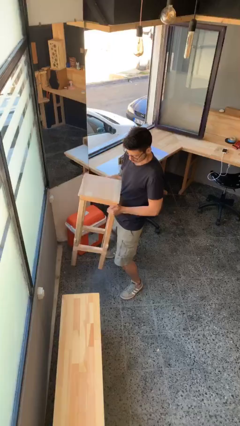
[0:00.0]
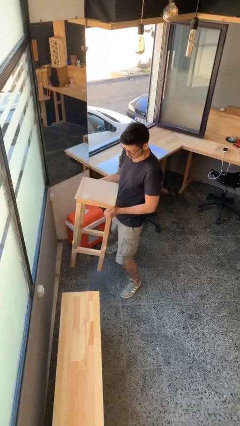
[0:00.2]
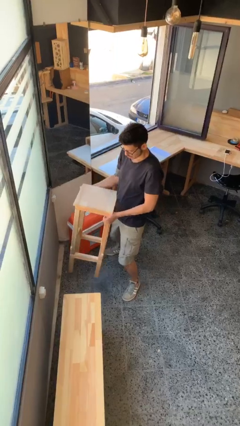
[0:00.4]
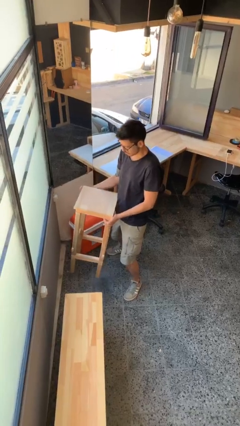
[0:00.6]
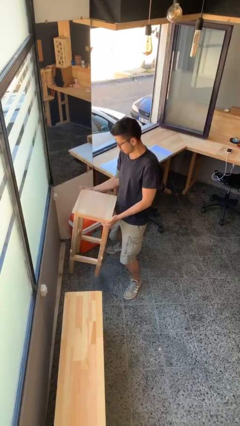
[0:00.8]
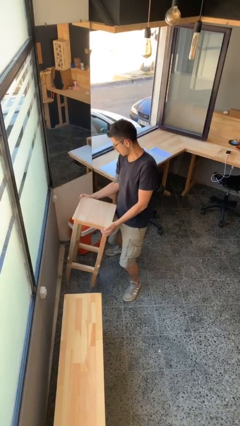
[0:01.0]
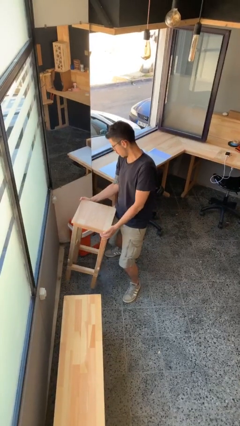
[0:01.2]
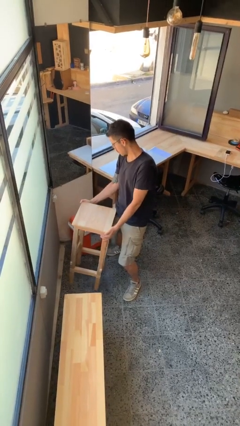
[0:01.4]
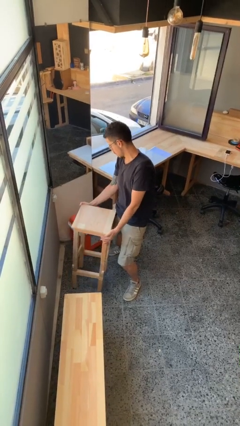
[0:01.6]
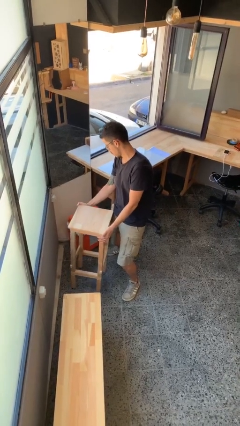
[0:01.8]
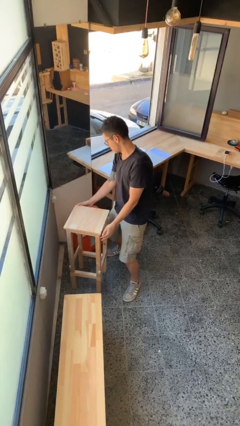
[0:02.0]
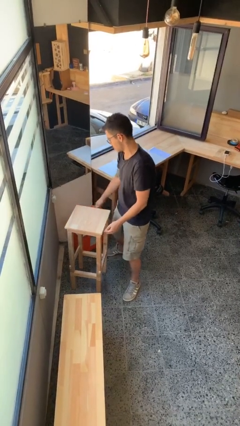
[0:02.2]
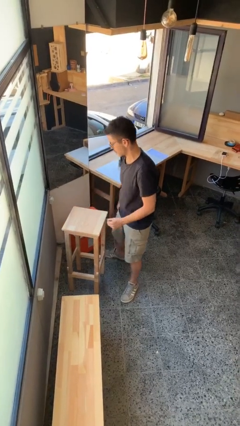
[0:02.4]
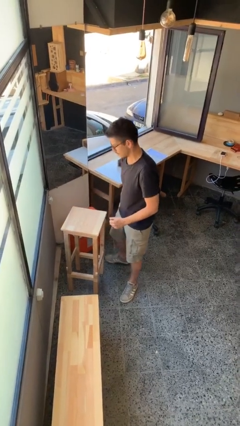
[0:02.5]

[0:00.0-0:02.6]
person puts down object on floor

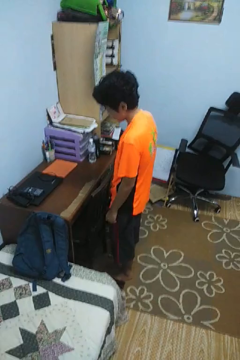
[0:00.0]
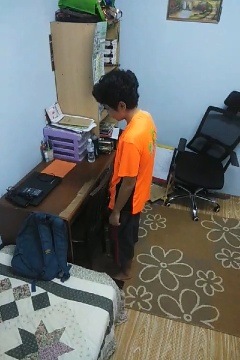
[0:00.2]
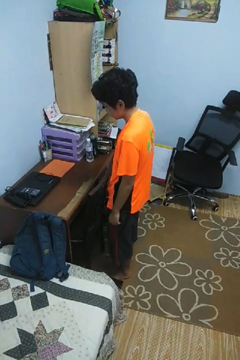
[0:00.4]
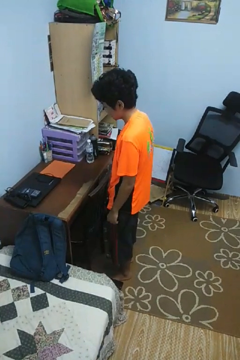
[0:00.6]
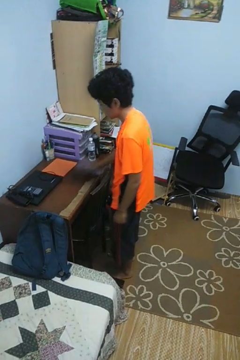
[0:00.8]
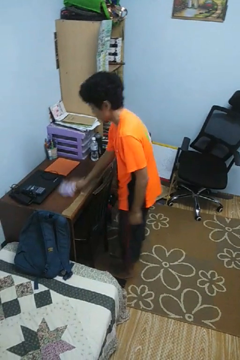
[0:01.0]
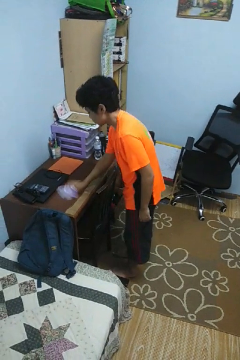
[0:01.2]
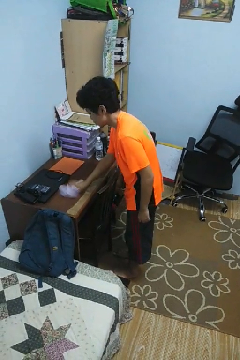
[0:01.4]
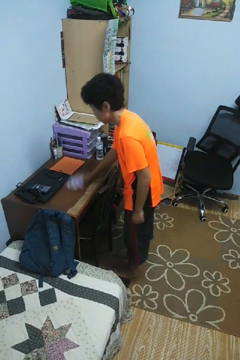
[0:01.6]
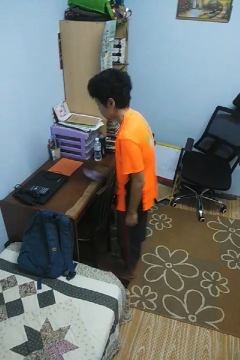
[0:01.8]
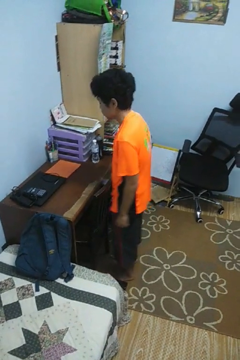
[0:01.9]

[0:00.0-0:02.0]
person cleans table with rag

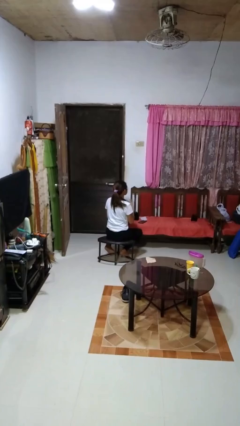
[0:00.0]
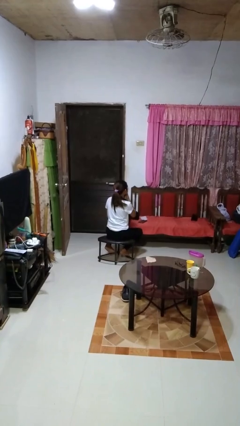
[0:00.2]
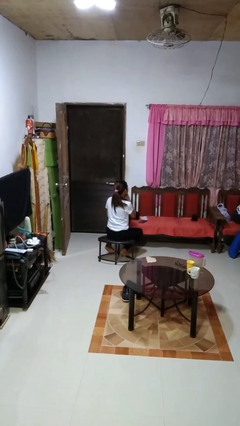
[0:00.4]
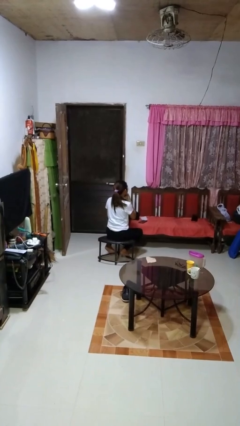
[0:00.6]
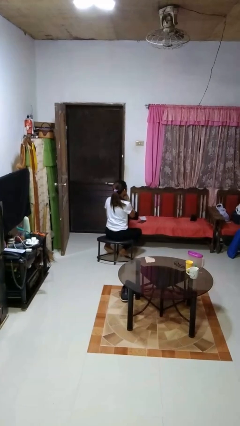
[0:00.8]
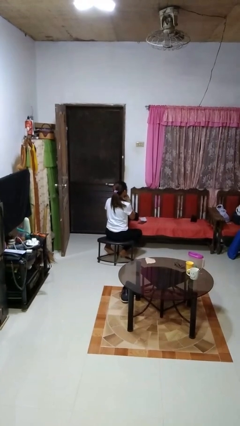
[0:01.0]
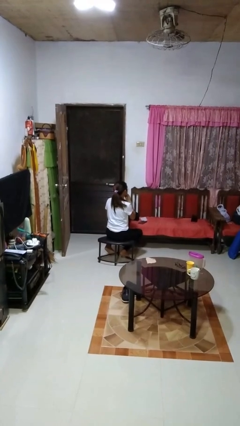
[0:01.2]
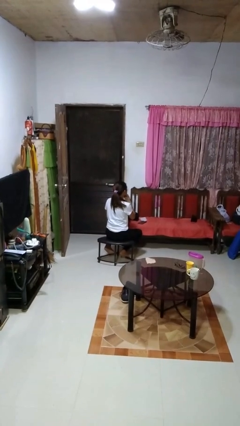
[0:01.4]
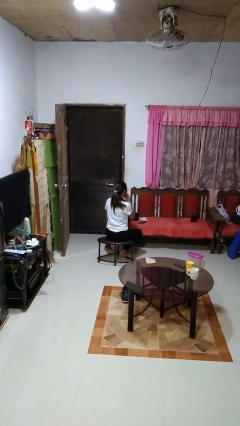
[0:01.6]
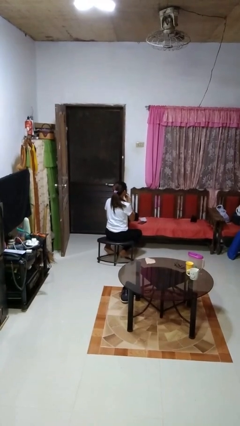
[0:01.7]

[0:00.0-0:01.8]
person strokes chin

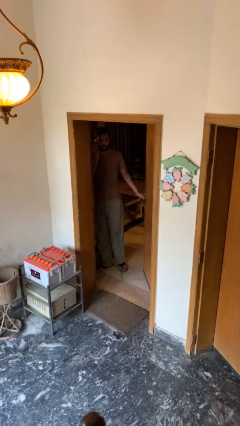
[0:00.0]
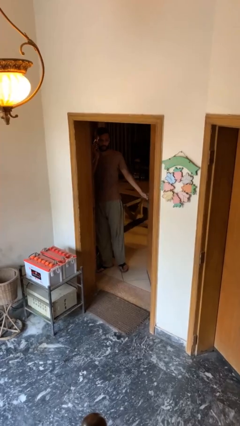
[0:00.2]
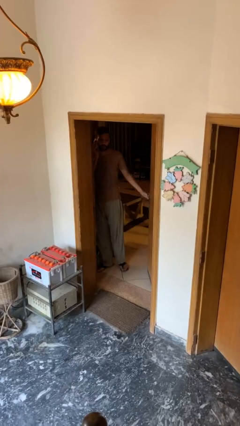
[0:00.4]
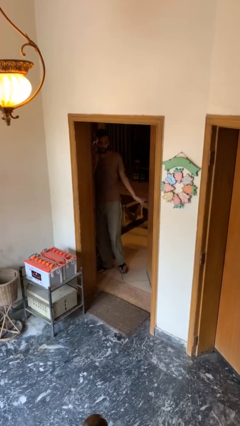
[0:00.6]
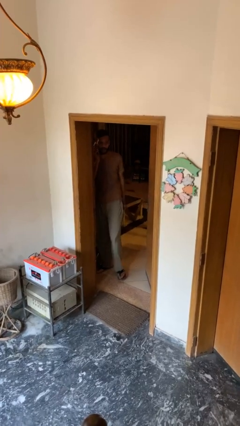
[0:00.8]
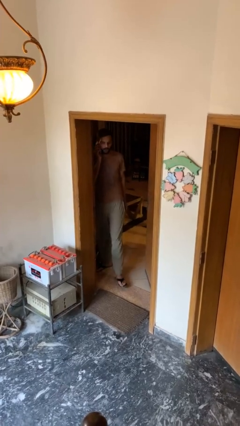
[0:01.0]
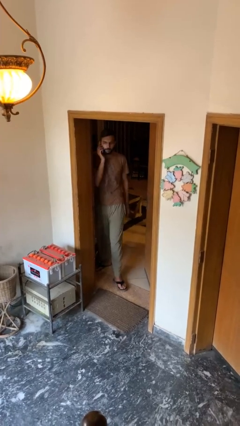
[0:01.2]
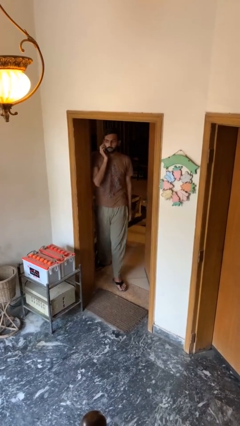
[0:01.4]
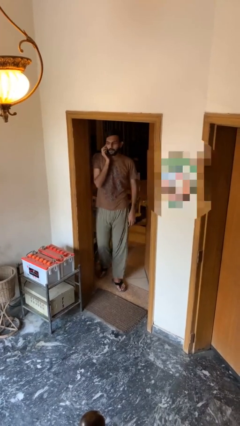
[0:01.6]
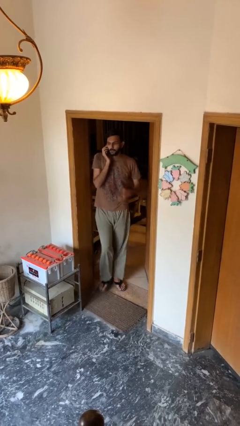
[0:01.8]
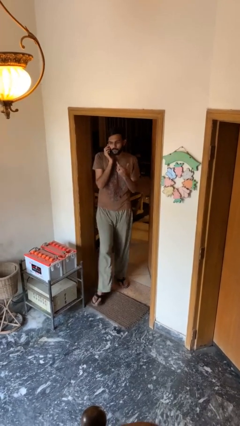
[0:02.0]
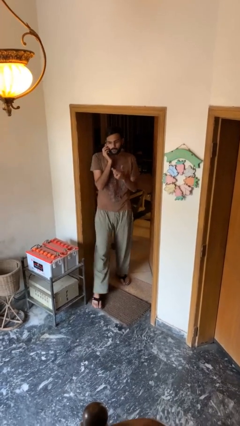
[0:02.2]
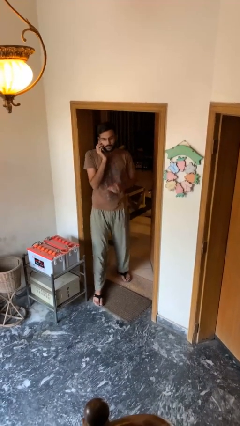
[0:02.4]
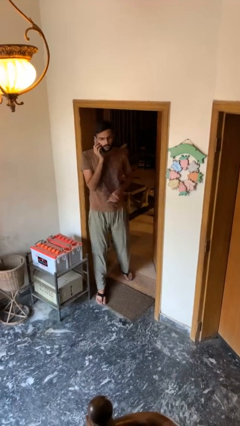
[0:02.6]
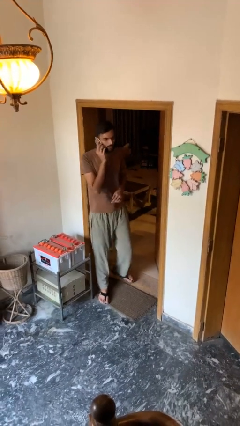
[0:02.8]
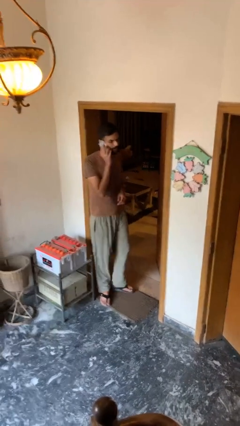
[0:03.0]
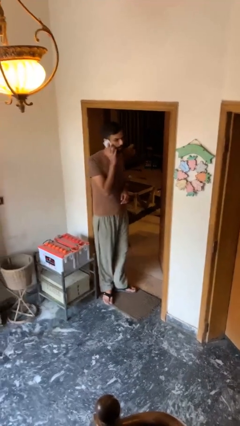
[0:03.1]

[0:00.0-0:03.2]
person enters scene through structure

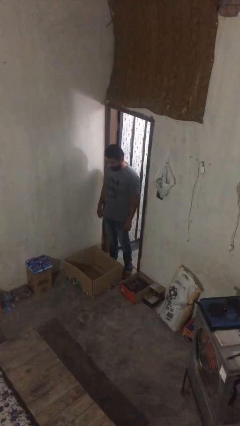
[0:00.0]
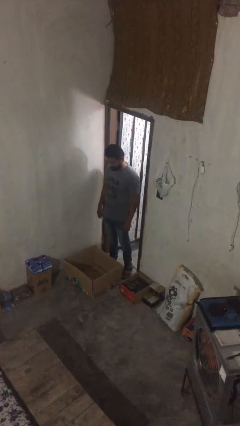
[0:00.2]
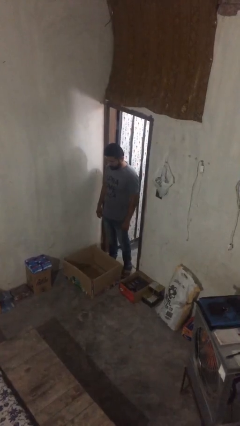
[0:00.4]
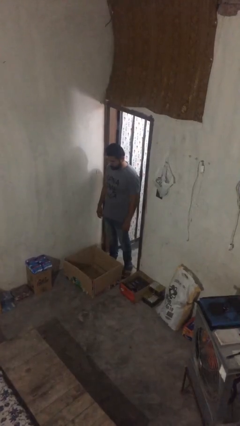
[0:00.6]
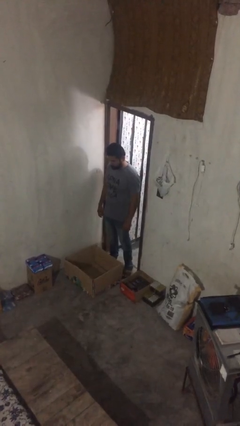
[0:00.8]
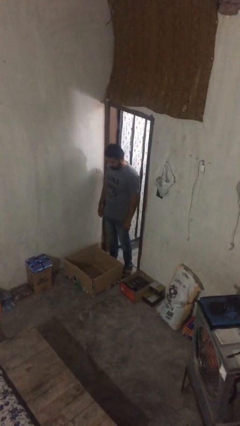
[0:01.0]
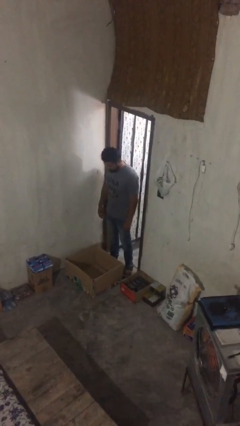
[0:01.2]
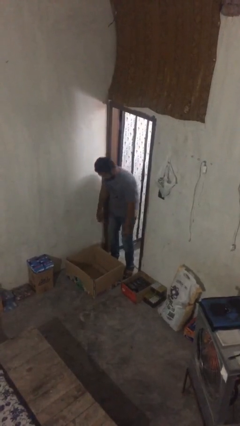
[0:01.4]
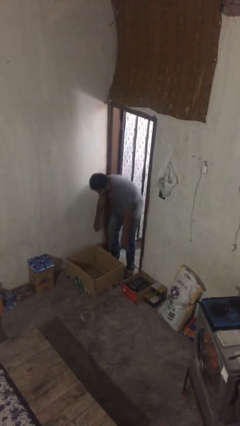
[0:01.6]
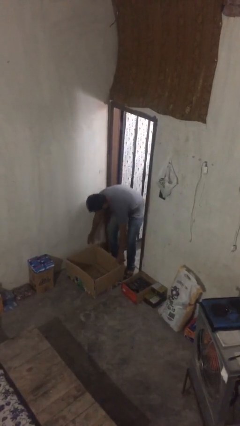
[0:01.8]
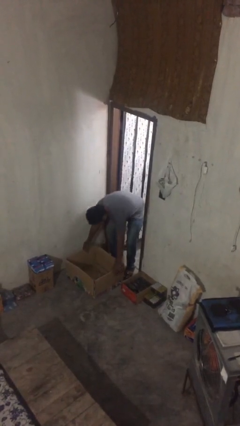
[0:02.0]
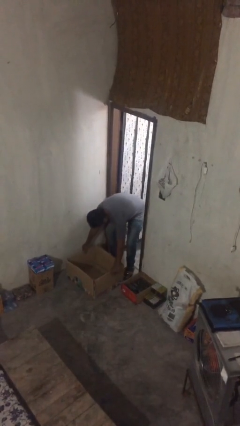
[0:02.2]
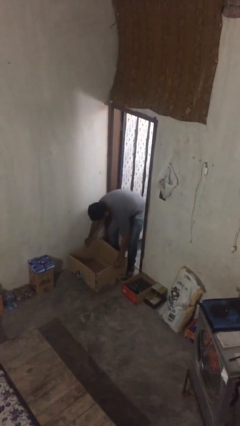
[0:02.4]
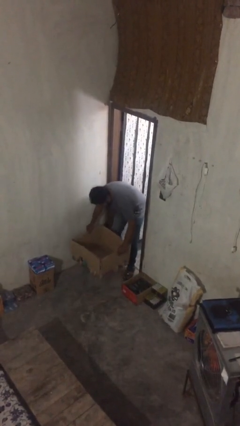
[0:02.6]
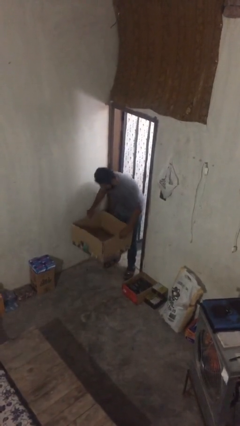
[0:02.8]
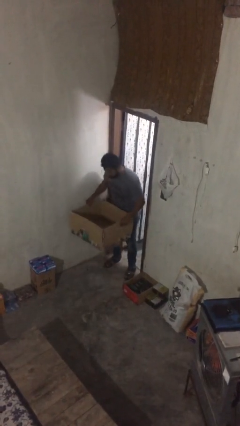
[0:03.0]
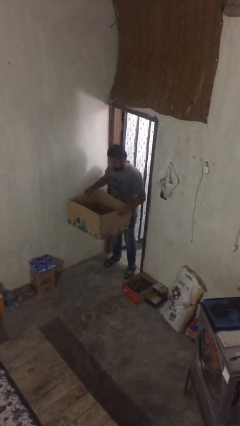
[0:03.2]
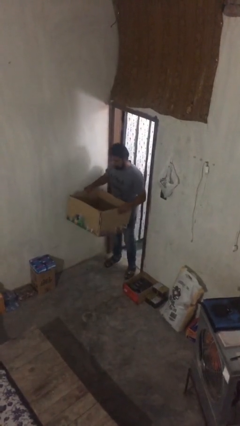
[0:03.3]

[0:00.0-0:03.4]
person picks up object from floor

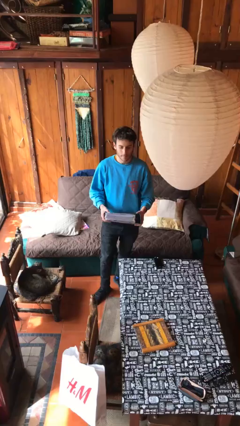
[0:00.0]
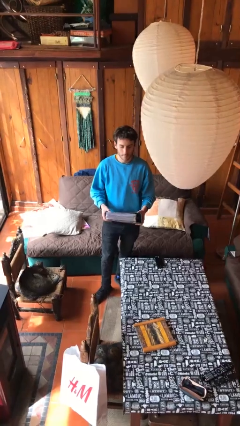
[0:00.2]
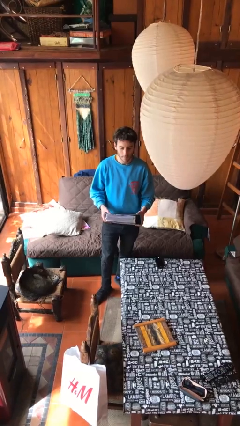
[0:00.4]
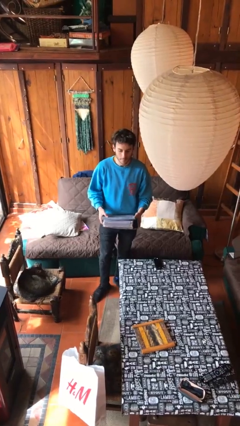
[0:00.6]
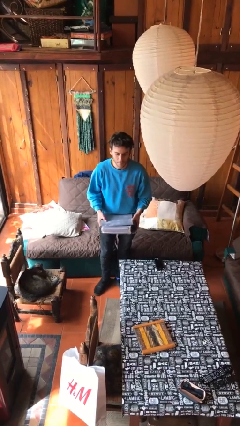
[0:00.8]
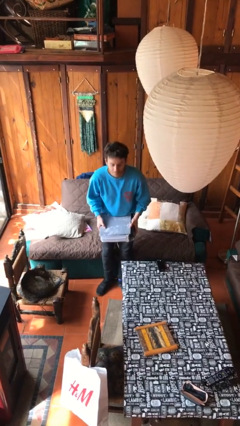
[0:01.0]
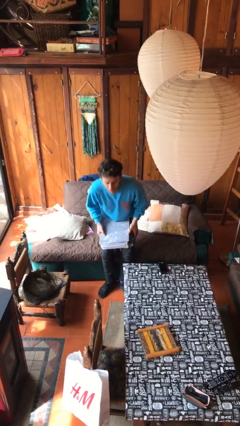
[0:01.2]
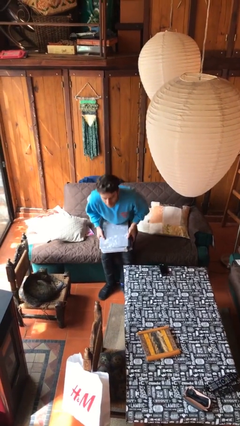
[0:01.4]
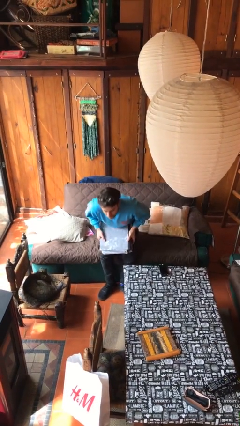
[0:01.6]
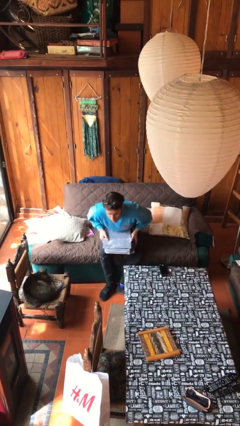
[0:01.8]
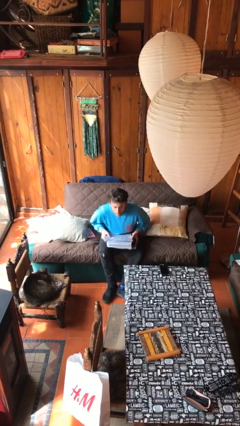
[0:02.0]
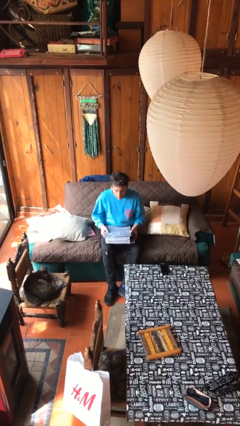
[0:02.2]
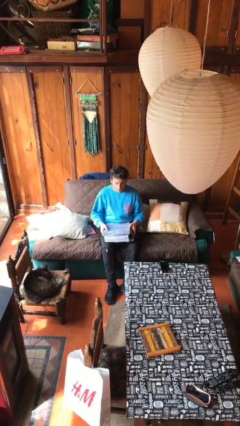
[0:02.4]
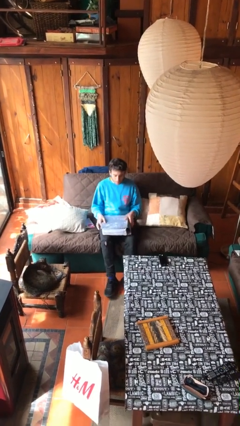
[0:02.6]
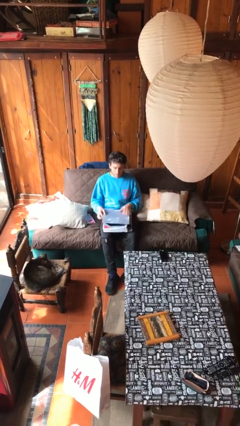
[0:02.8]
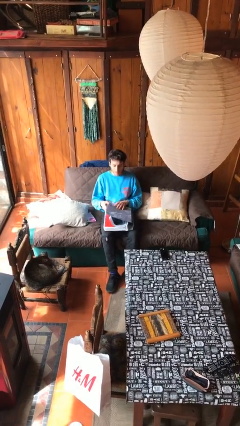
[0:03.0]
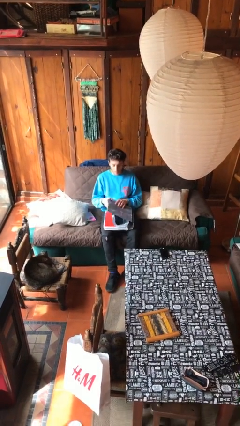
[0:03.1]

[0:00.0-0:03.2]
person sits down

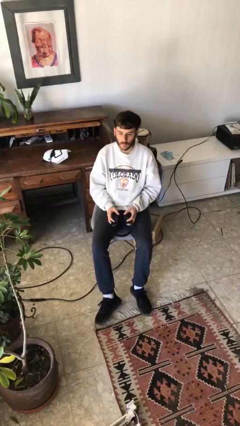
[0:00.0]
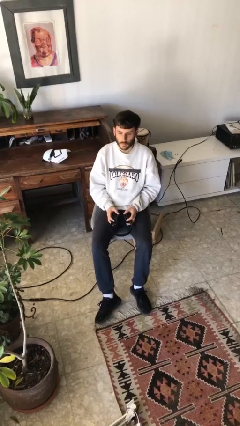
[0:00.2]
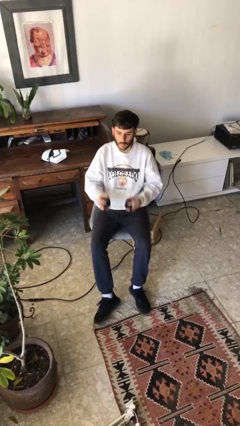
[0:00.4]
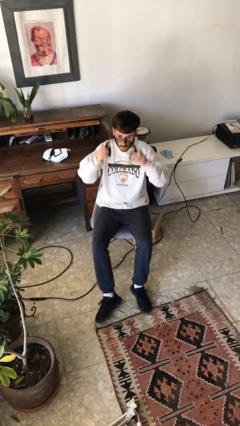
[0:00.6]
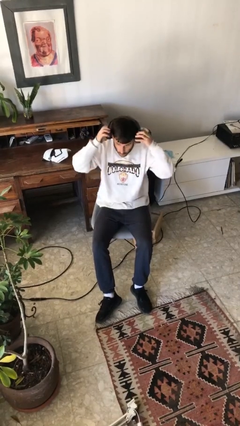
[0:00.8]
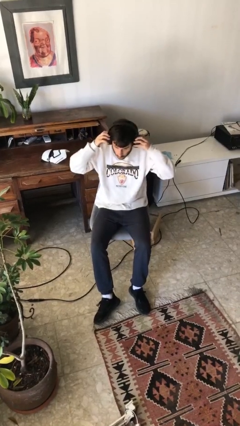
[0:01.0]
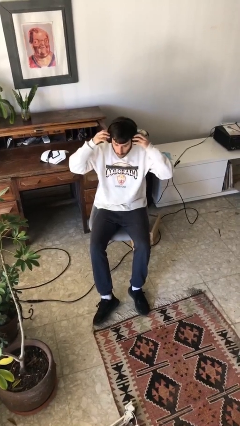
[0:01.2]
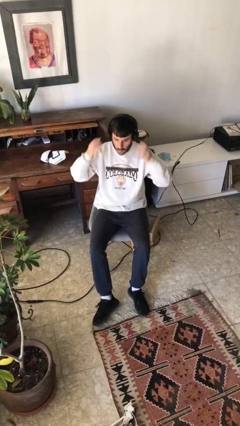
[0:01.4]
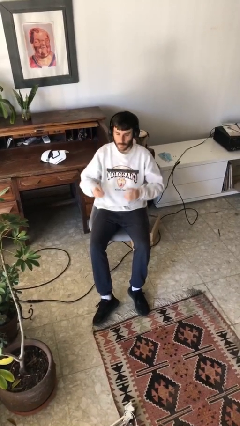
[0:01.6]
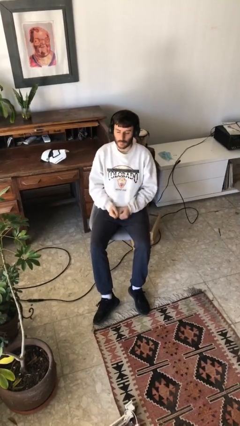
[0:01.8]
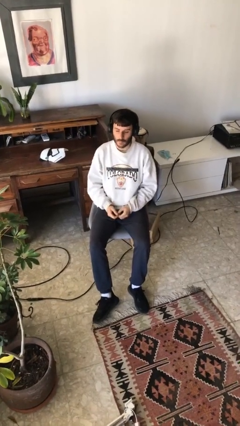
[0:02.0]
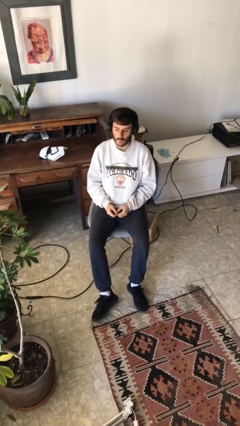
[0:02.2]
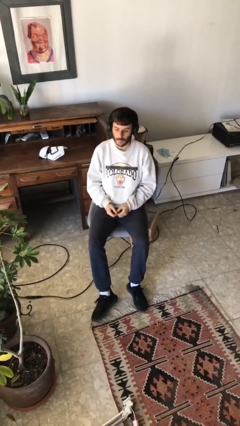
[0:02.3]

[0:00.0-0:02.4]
person puts on headphones
